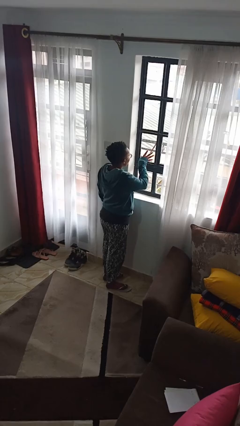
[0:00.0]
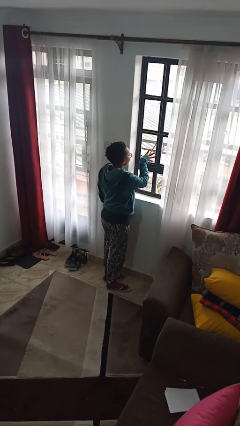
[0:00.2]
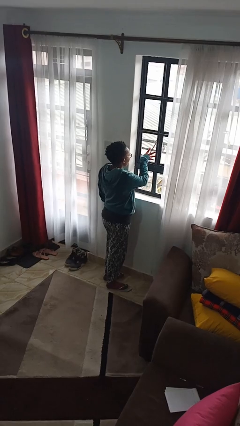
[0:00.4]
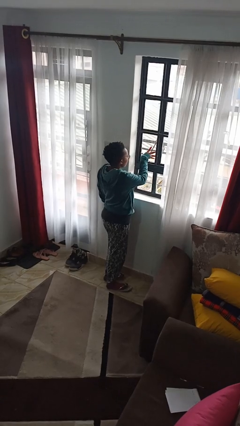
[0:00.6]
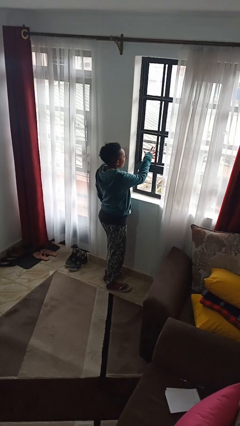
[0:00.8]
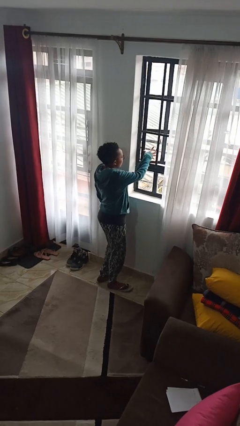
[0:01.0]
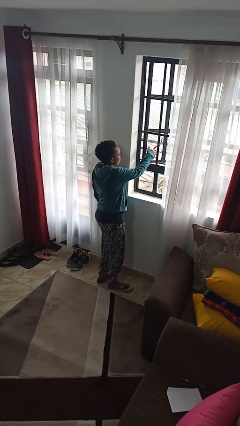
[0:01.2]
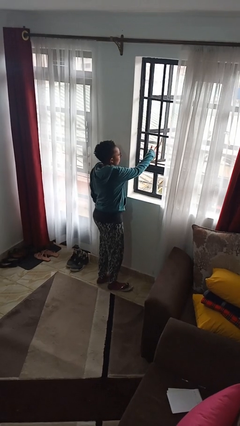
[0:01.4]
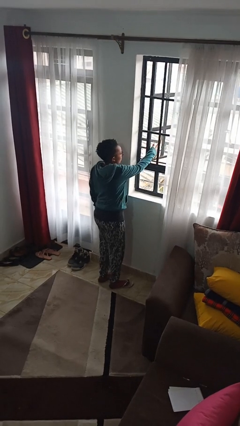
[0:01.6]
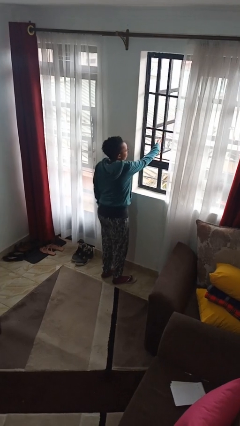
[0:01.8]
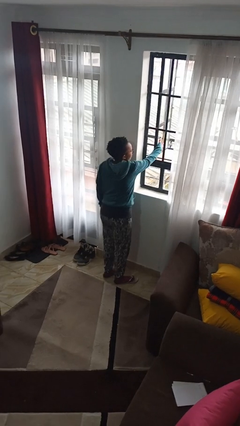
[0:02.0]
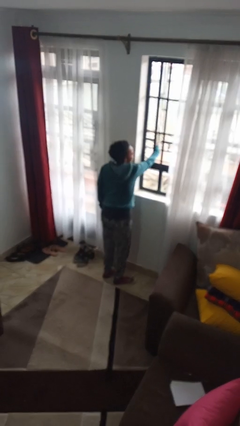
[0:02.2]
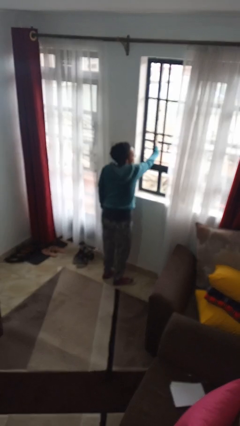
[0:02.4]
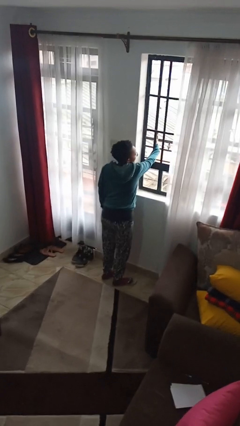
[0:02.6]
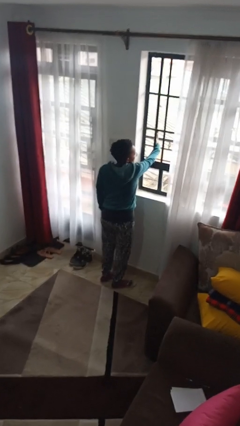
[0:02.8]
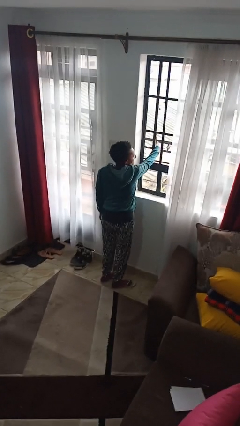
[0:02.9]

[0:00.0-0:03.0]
person opens home window

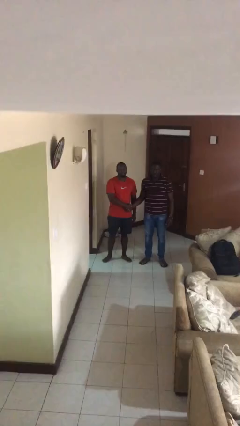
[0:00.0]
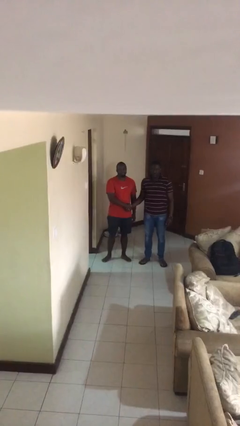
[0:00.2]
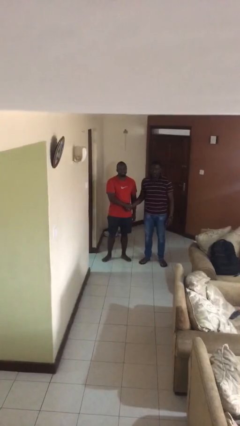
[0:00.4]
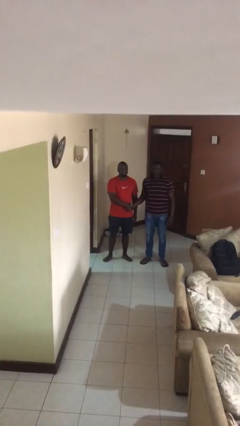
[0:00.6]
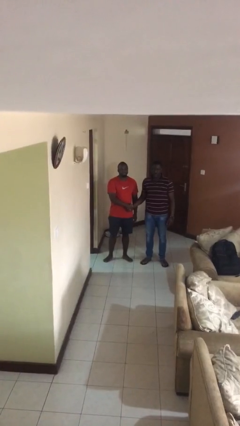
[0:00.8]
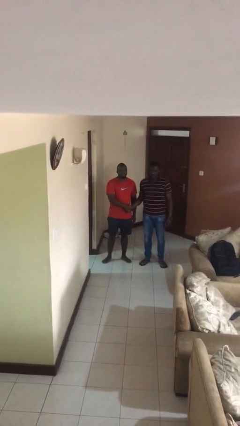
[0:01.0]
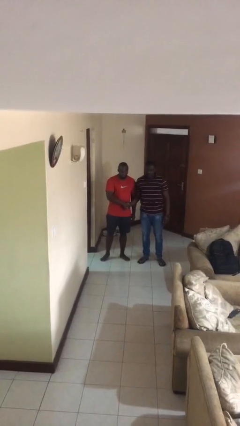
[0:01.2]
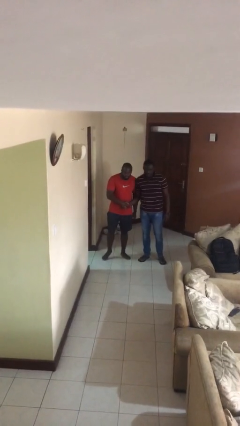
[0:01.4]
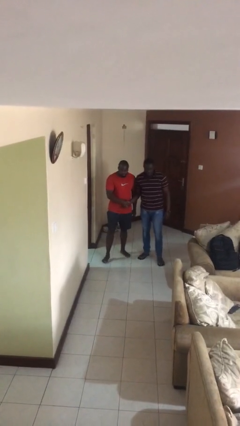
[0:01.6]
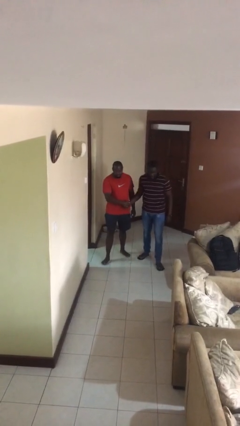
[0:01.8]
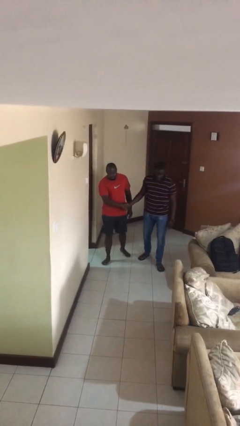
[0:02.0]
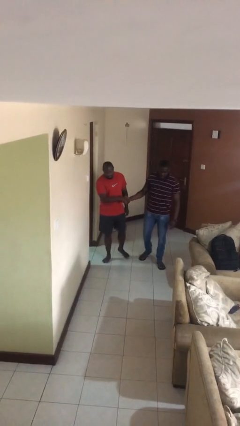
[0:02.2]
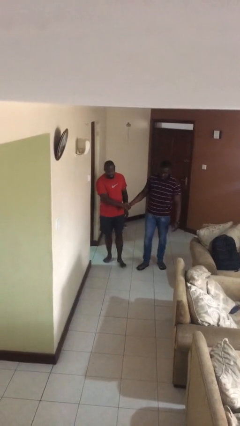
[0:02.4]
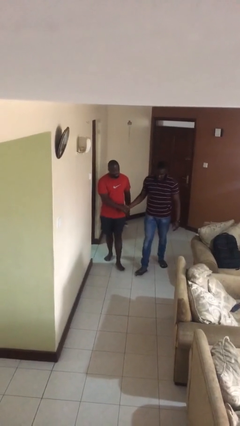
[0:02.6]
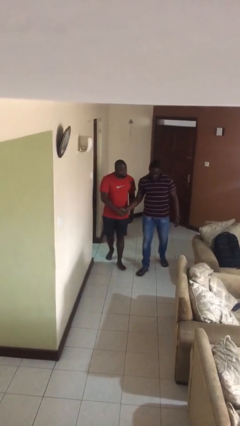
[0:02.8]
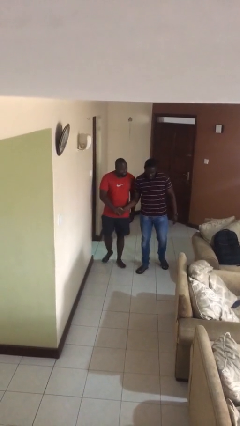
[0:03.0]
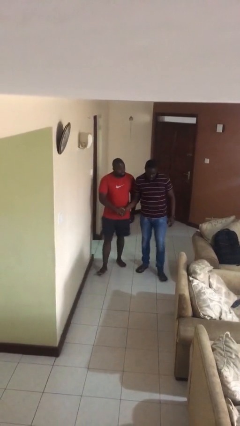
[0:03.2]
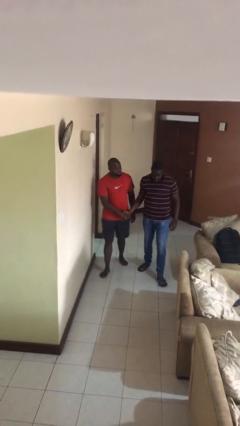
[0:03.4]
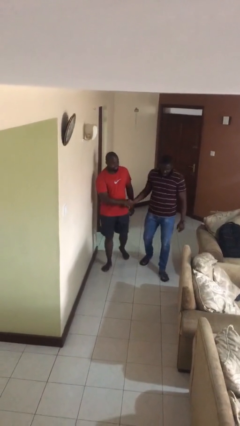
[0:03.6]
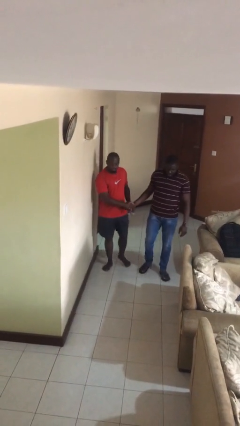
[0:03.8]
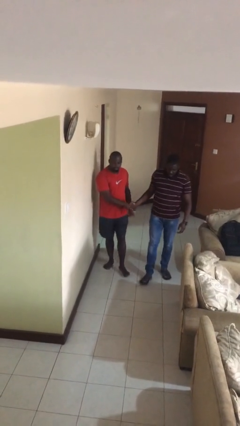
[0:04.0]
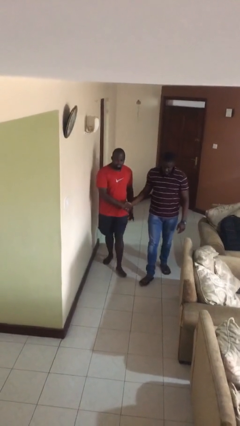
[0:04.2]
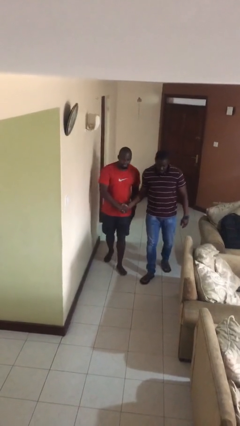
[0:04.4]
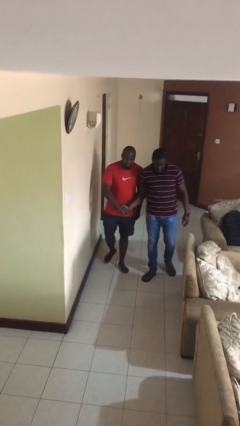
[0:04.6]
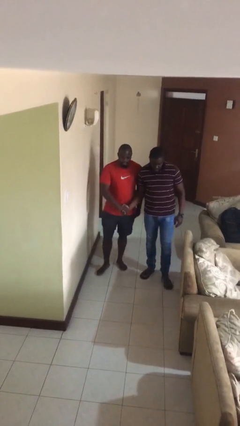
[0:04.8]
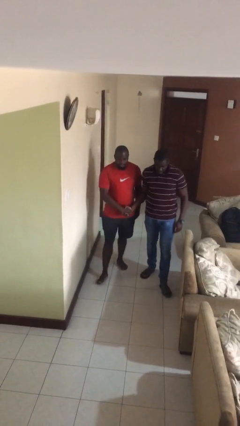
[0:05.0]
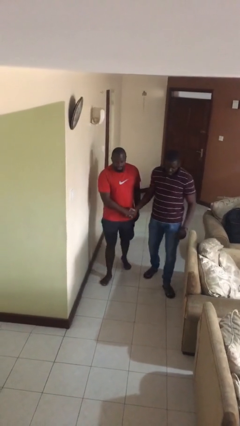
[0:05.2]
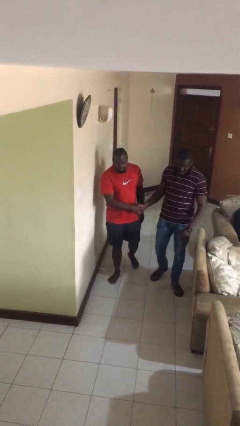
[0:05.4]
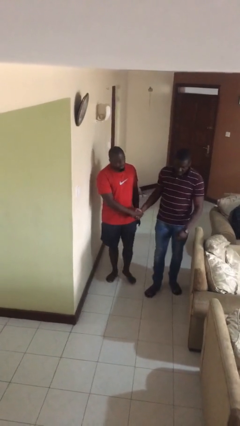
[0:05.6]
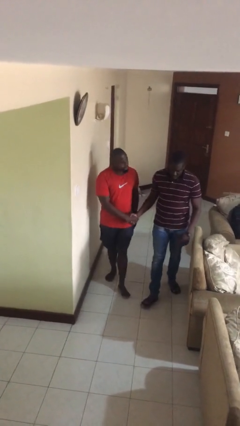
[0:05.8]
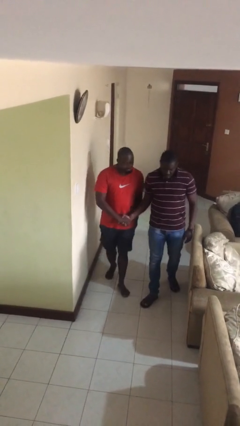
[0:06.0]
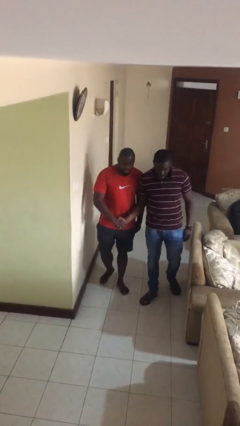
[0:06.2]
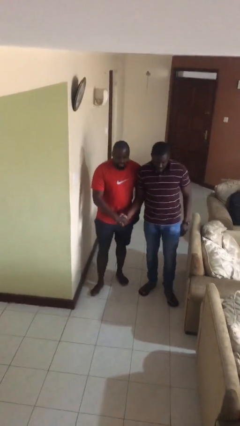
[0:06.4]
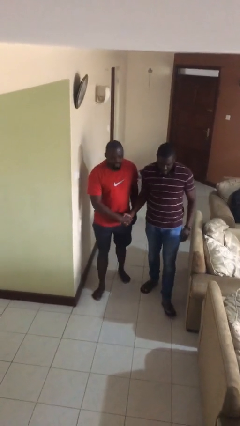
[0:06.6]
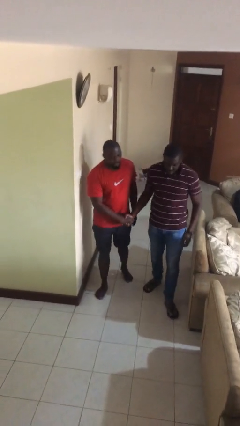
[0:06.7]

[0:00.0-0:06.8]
person holds hand

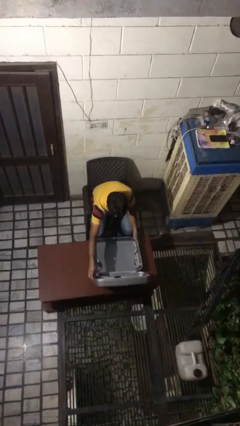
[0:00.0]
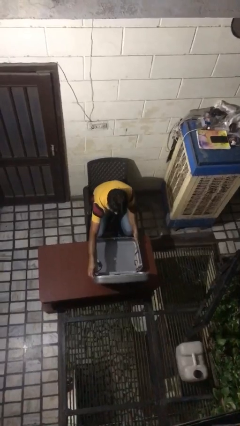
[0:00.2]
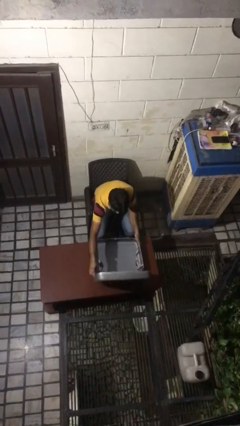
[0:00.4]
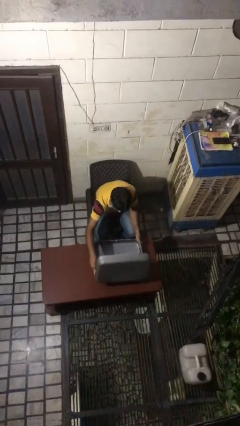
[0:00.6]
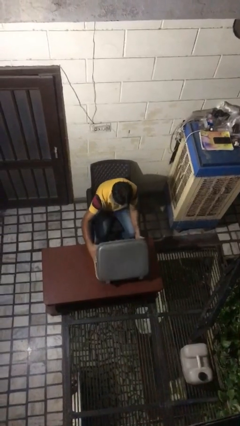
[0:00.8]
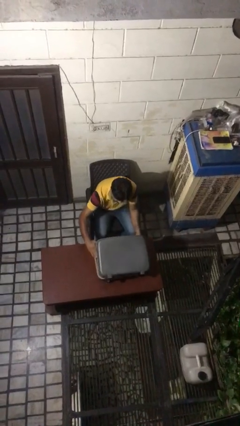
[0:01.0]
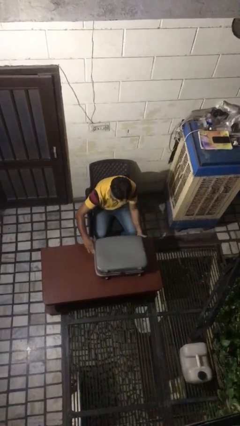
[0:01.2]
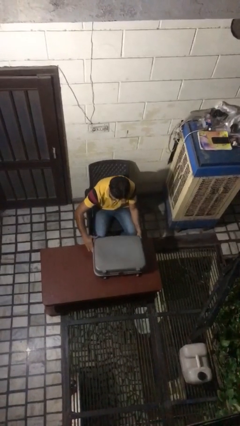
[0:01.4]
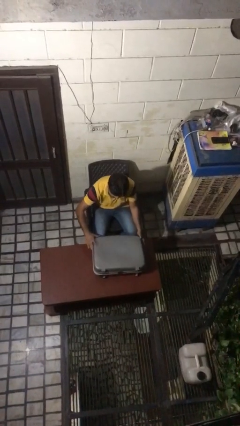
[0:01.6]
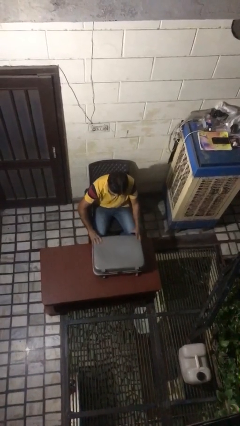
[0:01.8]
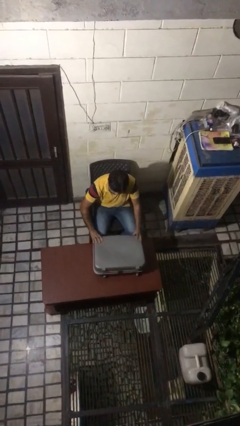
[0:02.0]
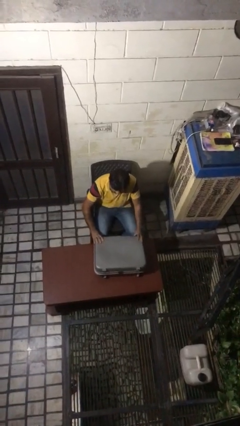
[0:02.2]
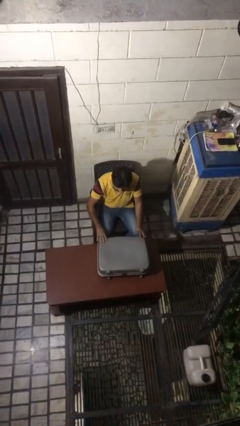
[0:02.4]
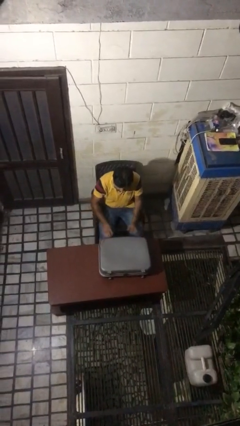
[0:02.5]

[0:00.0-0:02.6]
person closes suitcase

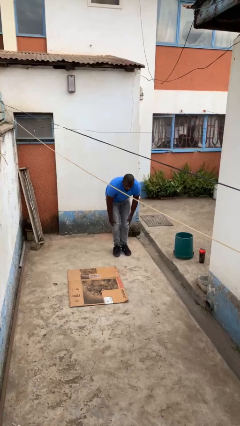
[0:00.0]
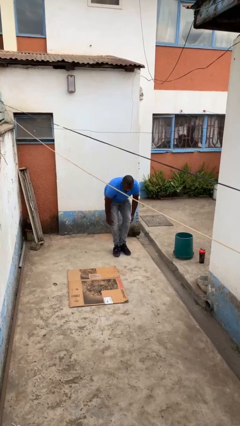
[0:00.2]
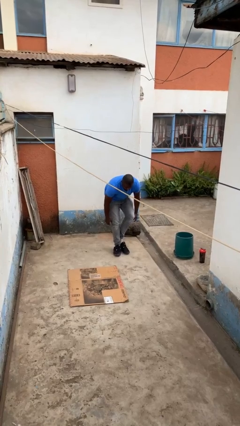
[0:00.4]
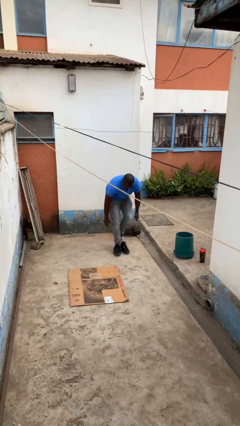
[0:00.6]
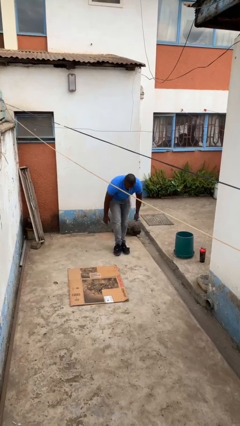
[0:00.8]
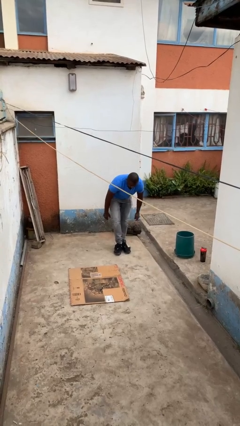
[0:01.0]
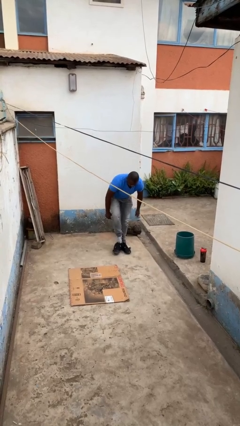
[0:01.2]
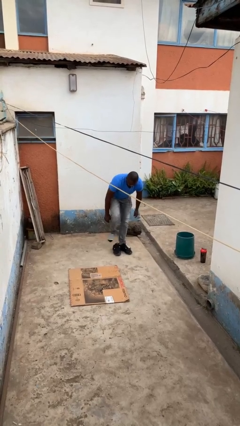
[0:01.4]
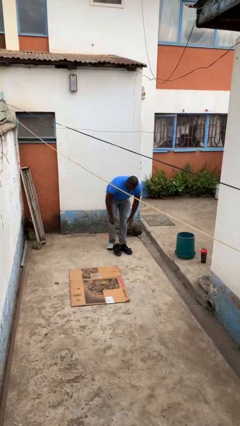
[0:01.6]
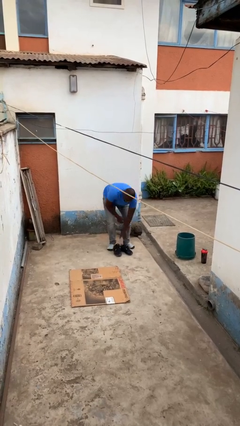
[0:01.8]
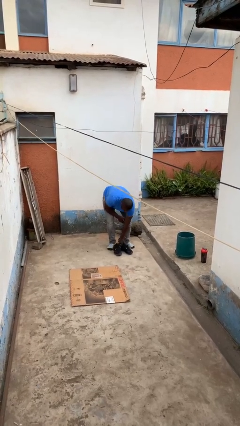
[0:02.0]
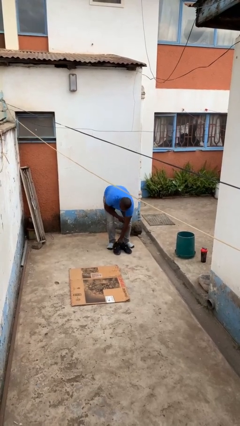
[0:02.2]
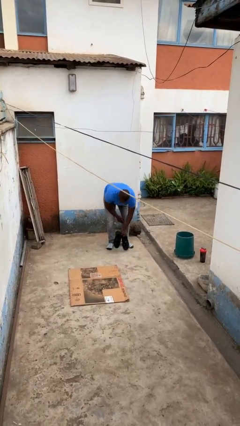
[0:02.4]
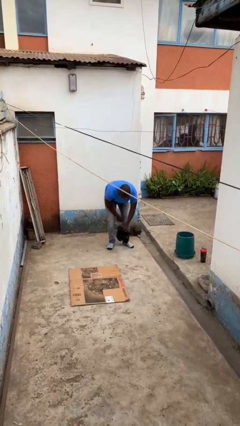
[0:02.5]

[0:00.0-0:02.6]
person takes off shoes

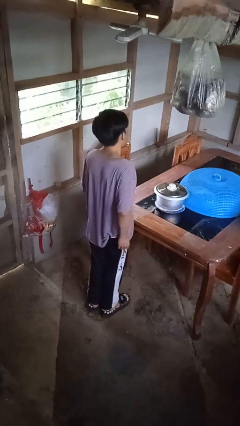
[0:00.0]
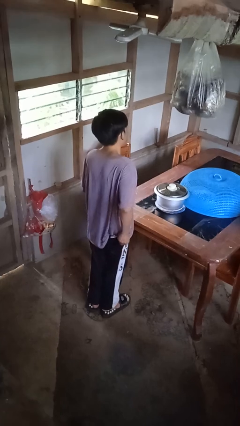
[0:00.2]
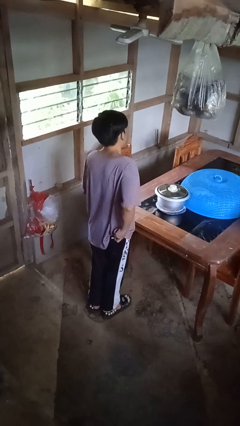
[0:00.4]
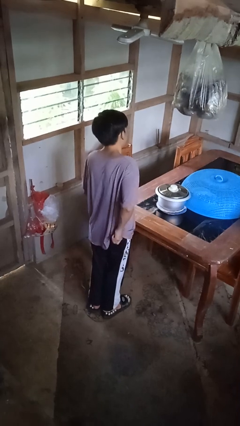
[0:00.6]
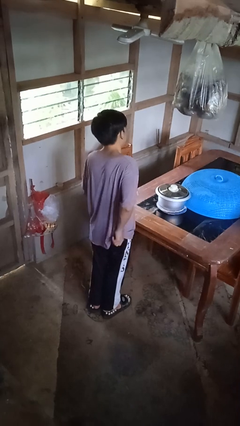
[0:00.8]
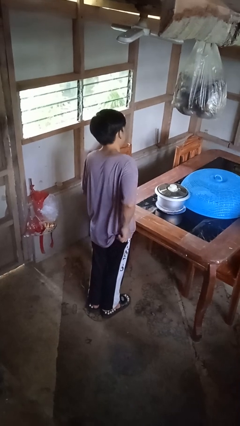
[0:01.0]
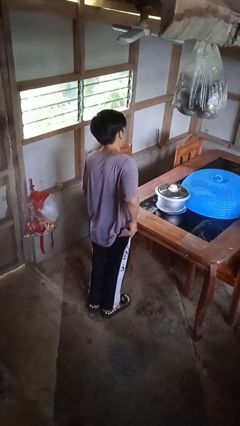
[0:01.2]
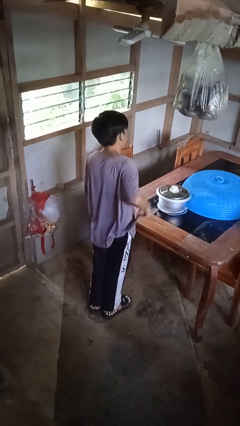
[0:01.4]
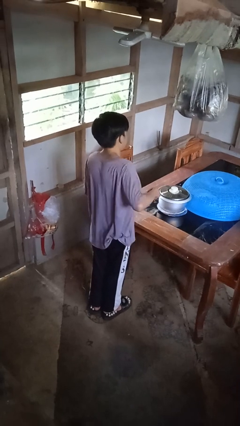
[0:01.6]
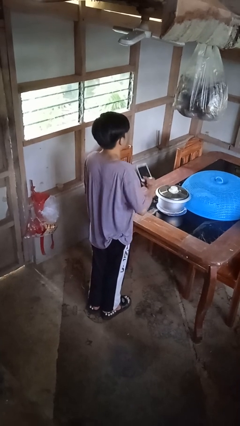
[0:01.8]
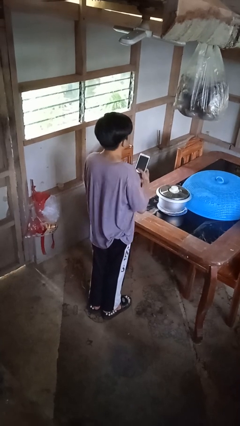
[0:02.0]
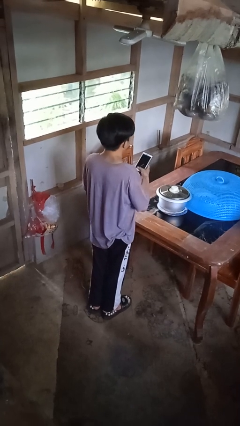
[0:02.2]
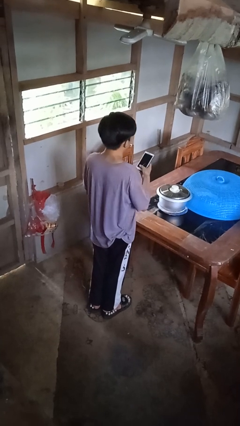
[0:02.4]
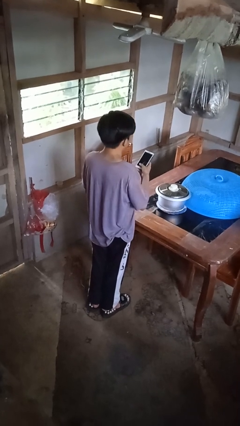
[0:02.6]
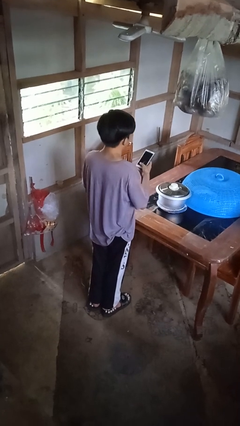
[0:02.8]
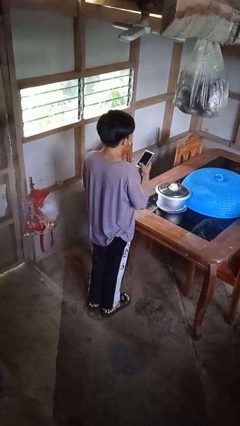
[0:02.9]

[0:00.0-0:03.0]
person takes phone from pocket
